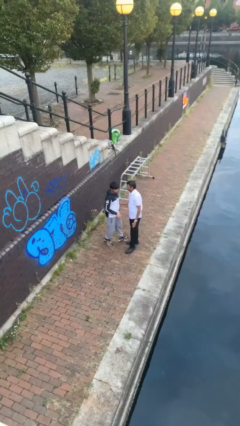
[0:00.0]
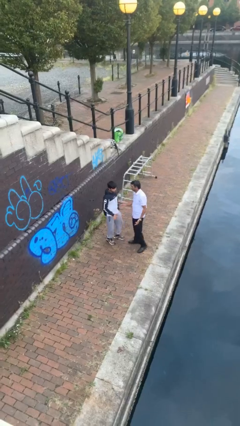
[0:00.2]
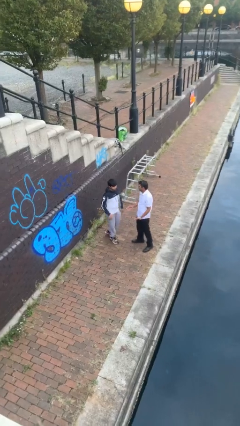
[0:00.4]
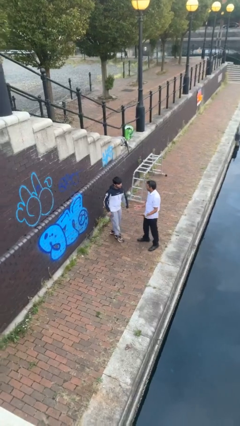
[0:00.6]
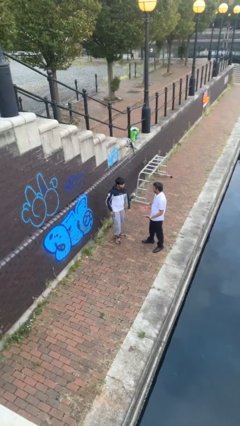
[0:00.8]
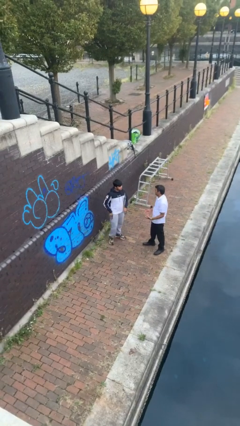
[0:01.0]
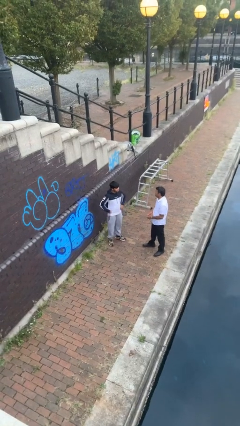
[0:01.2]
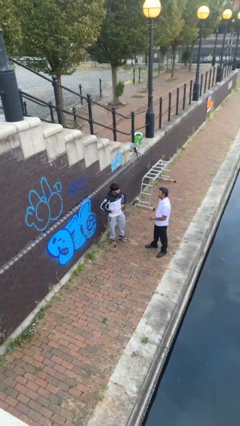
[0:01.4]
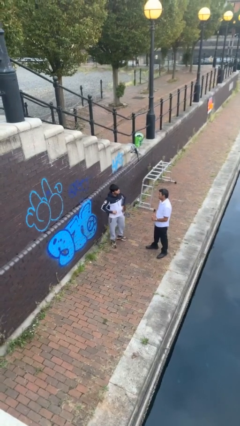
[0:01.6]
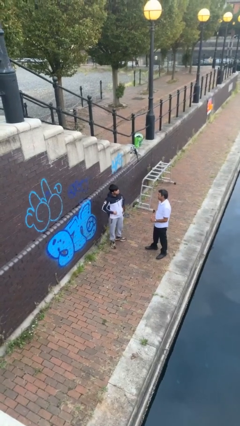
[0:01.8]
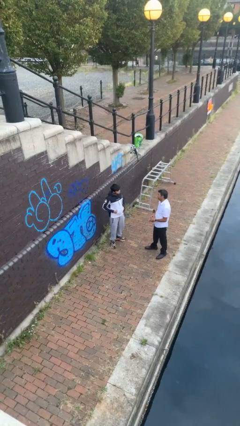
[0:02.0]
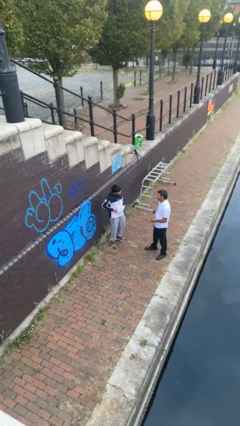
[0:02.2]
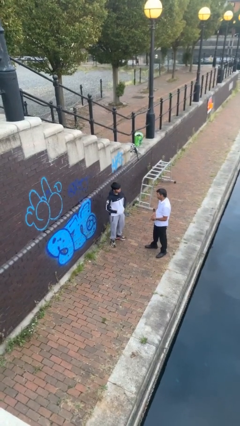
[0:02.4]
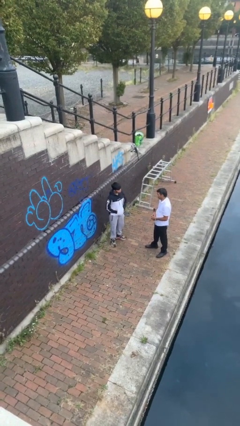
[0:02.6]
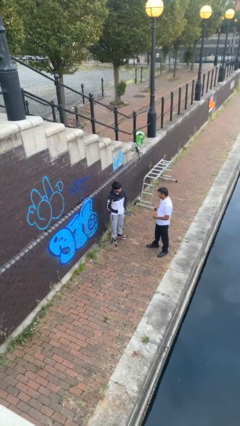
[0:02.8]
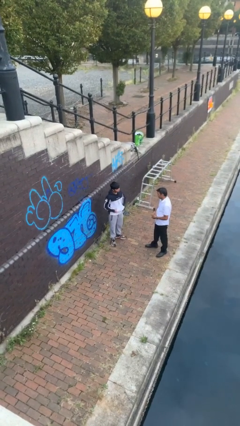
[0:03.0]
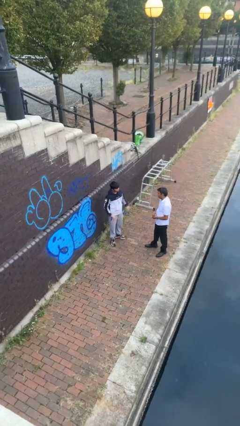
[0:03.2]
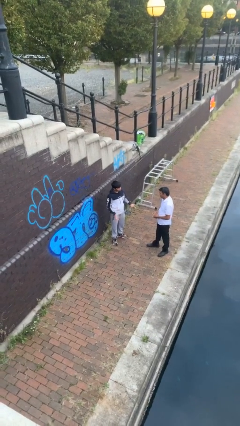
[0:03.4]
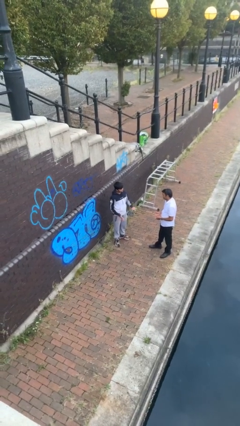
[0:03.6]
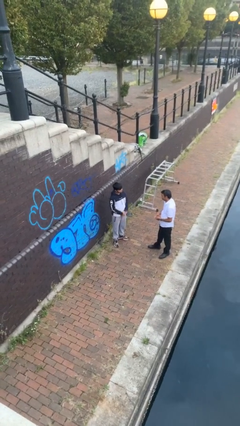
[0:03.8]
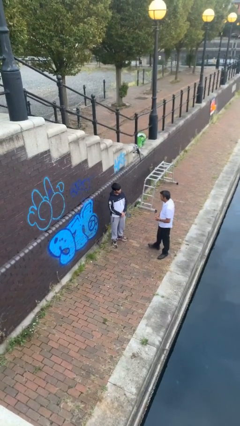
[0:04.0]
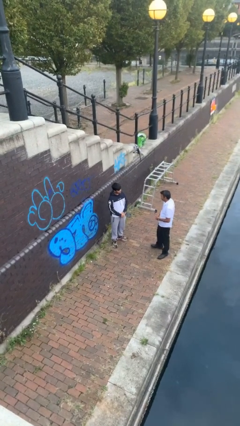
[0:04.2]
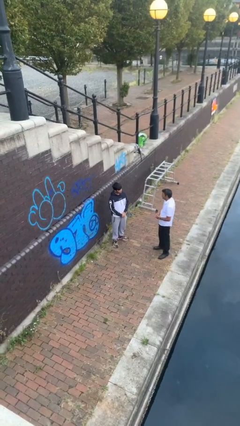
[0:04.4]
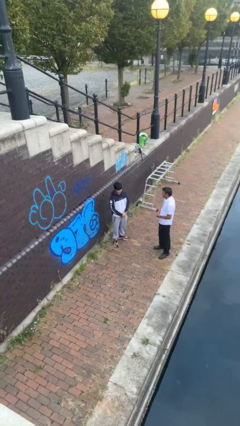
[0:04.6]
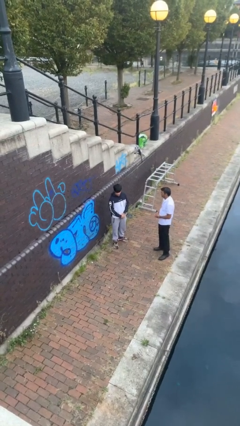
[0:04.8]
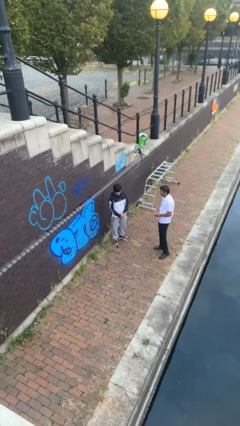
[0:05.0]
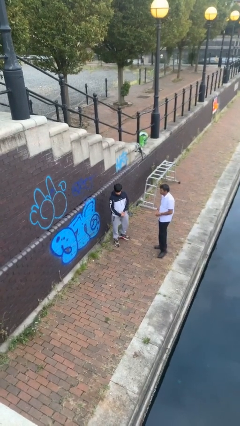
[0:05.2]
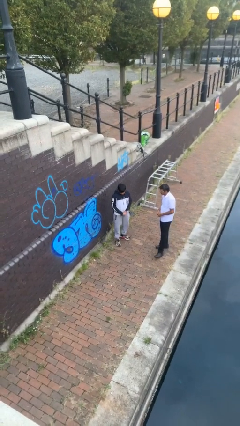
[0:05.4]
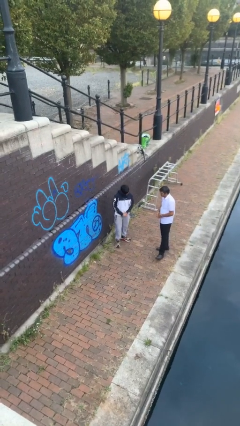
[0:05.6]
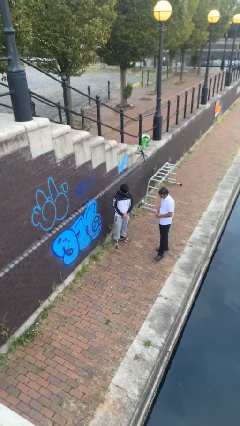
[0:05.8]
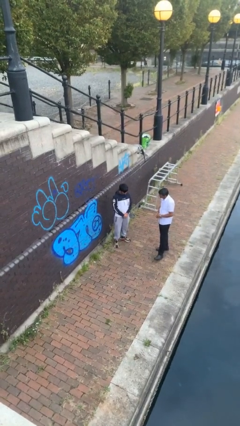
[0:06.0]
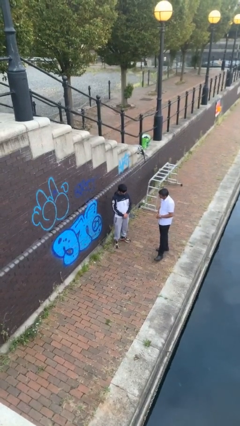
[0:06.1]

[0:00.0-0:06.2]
person talks to person

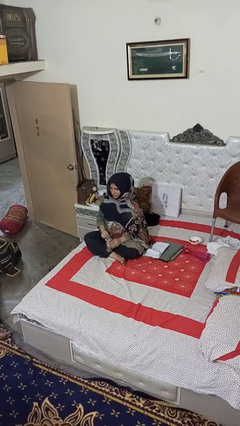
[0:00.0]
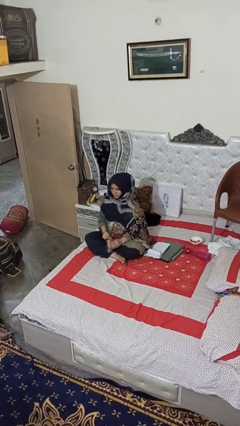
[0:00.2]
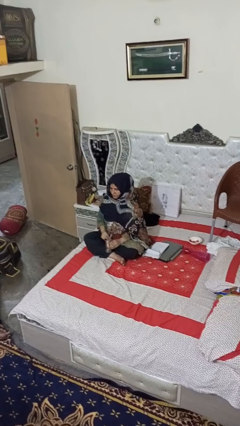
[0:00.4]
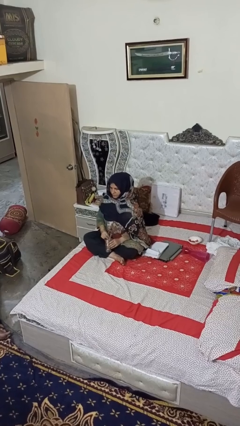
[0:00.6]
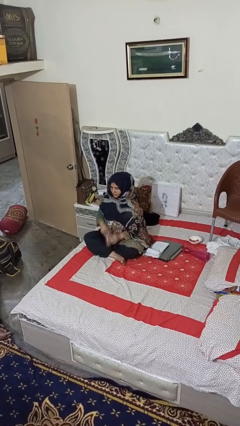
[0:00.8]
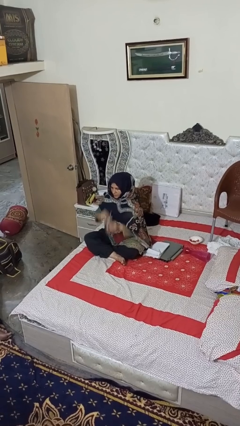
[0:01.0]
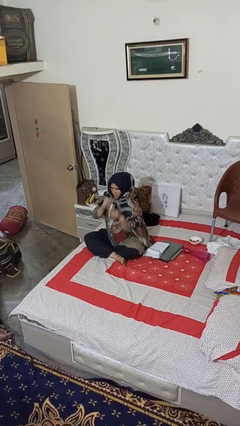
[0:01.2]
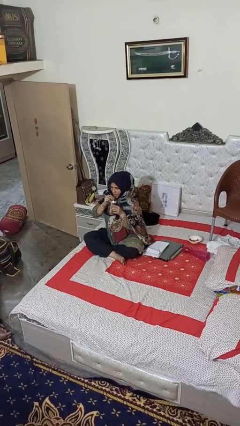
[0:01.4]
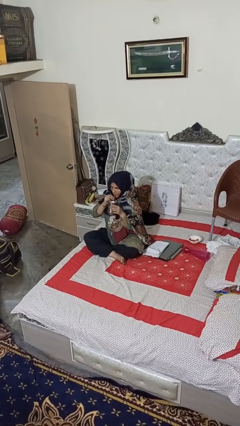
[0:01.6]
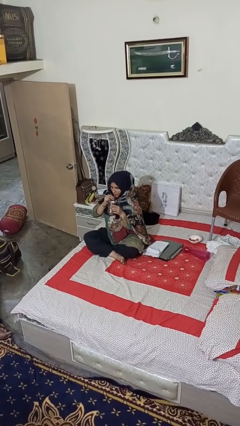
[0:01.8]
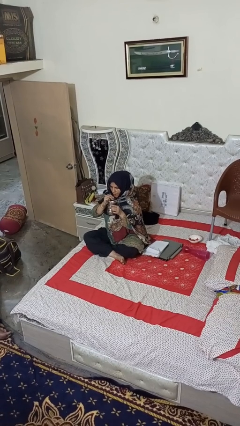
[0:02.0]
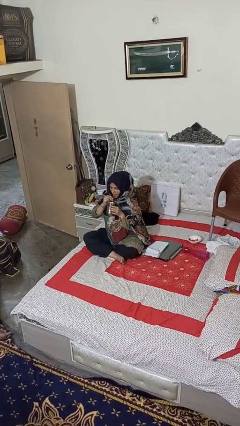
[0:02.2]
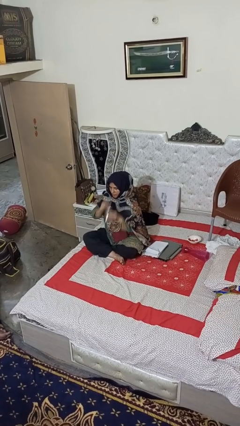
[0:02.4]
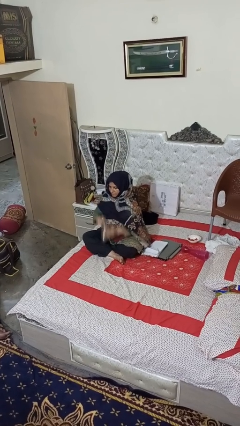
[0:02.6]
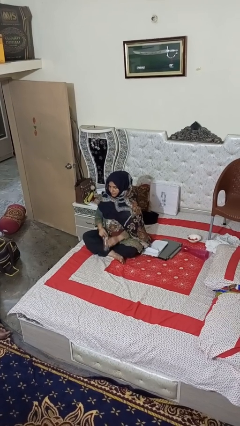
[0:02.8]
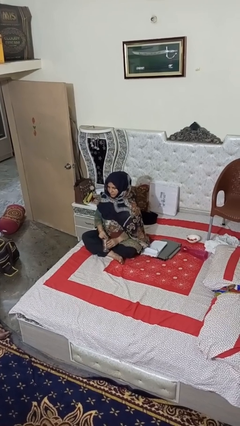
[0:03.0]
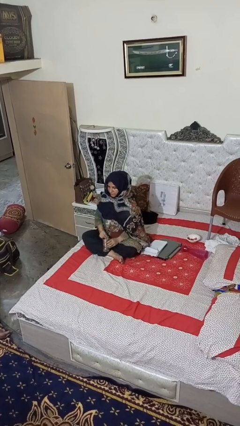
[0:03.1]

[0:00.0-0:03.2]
person drinks from straw

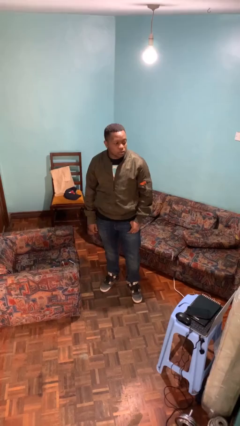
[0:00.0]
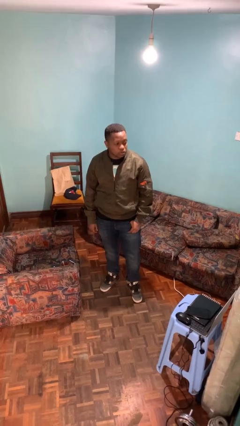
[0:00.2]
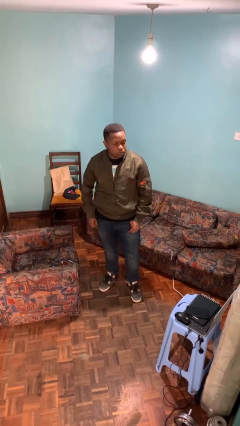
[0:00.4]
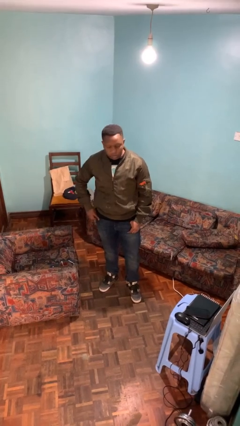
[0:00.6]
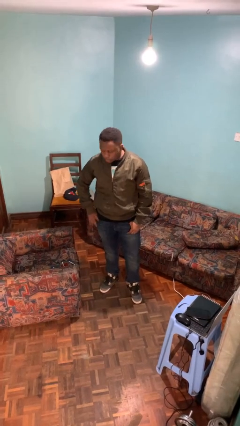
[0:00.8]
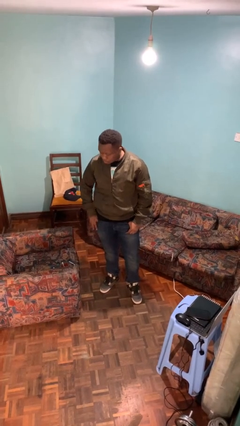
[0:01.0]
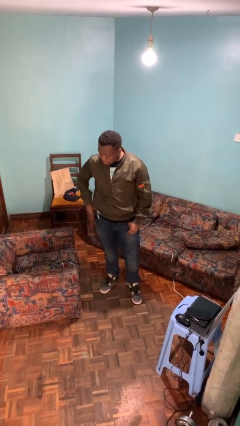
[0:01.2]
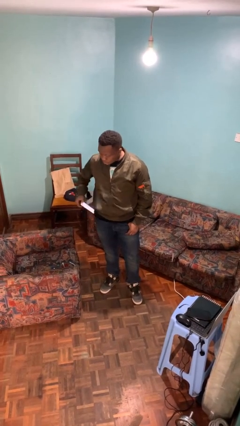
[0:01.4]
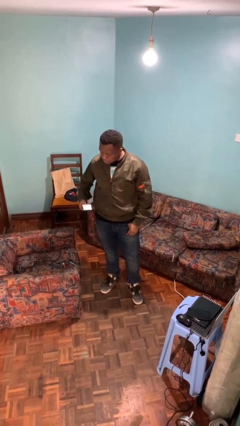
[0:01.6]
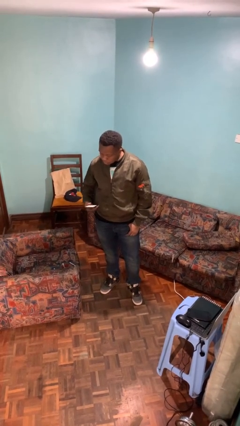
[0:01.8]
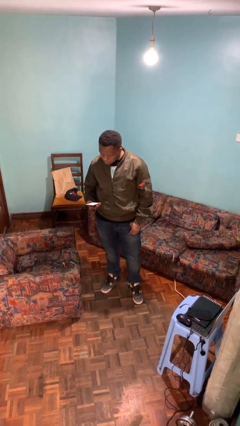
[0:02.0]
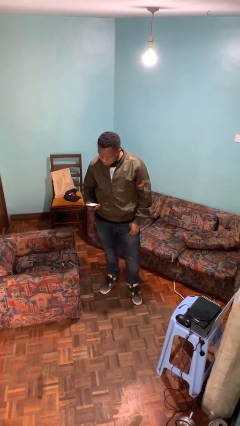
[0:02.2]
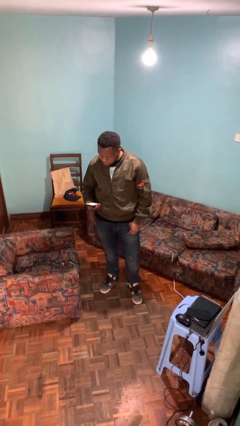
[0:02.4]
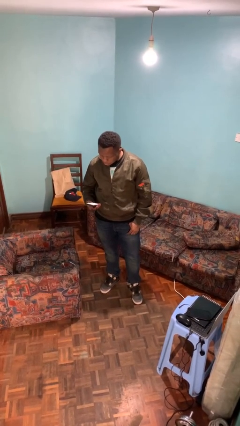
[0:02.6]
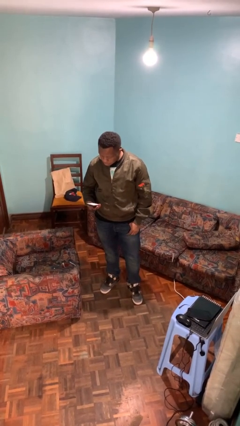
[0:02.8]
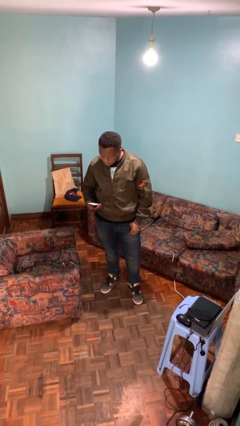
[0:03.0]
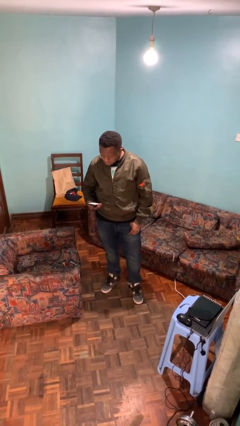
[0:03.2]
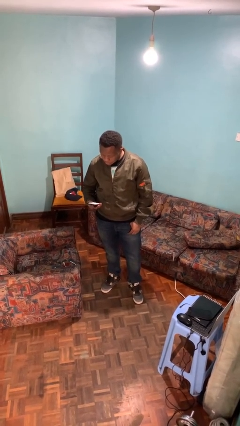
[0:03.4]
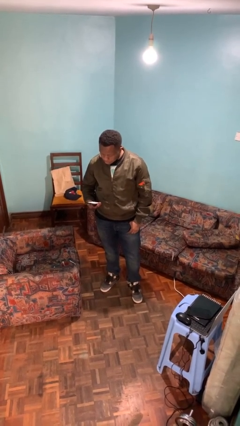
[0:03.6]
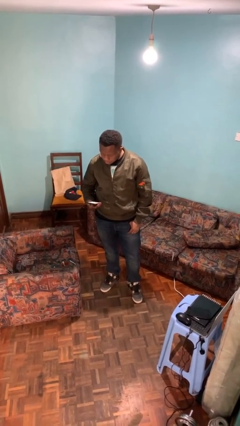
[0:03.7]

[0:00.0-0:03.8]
person takes phone from pocket

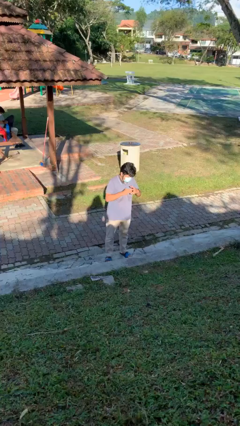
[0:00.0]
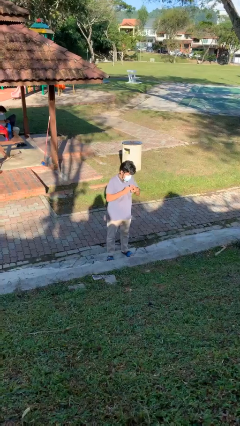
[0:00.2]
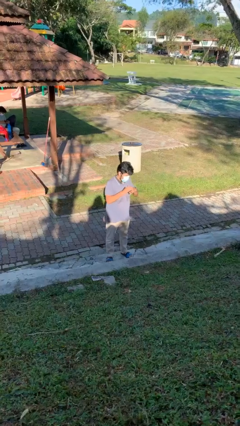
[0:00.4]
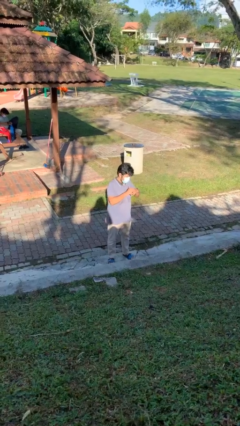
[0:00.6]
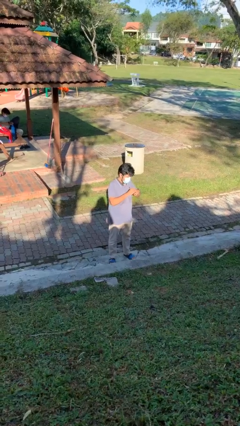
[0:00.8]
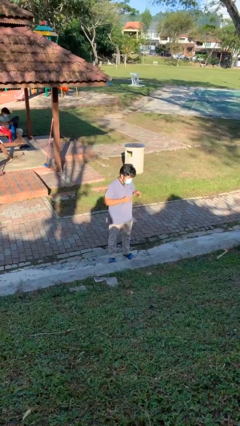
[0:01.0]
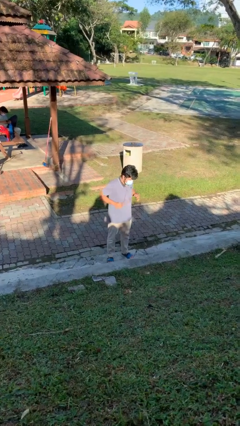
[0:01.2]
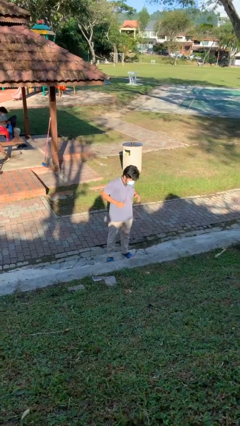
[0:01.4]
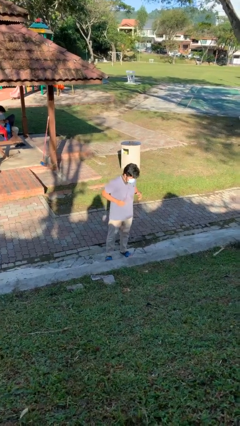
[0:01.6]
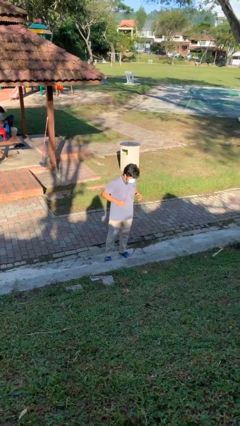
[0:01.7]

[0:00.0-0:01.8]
person puts on ring

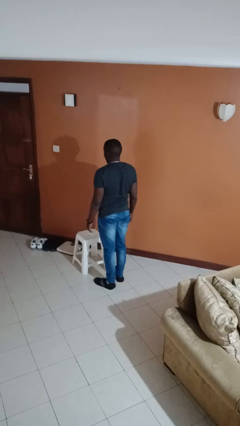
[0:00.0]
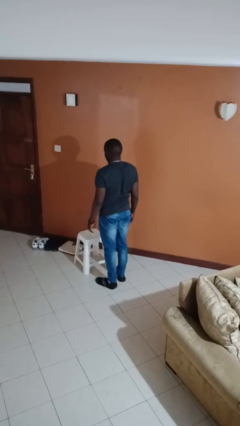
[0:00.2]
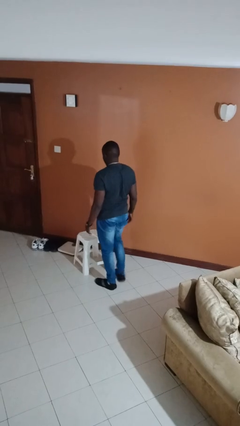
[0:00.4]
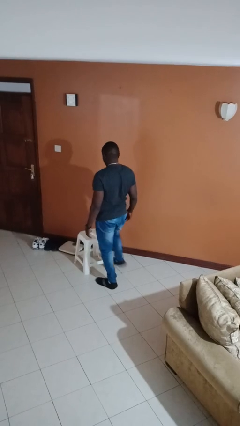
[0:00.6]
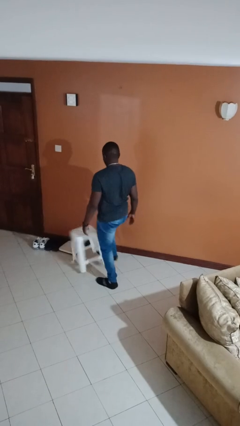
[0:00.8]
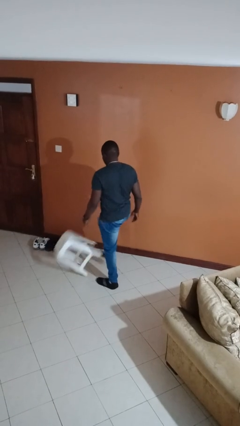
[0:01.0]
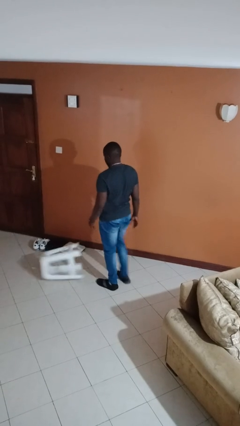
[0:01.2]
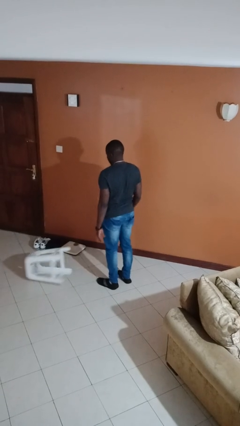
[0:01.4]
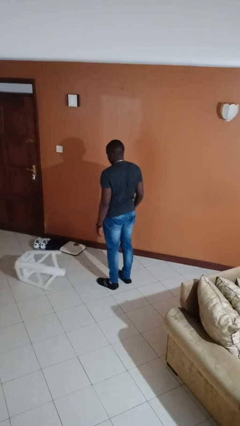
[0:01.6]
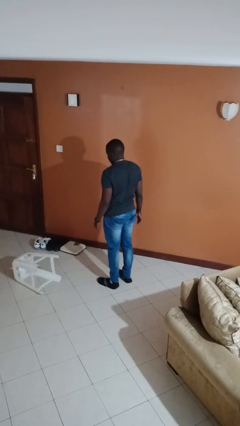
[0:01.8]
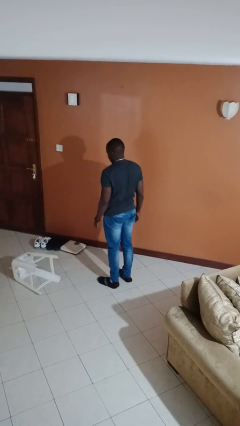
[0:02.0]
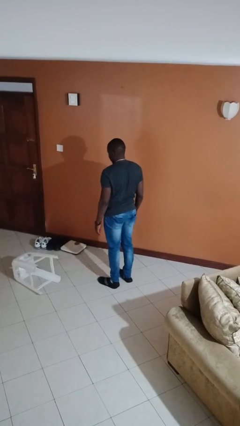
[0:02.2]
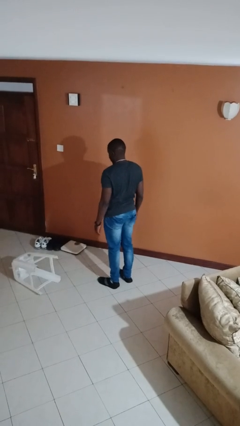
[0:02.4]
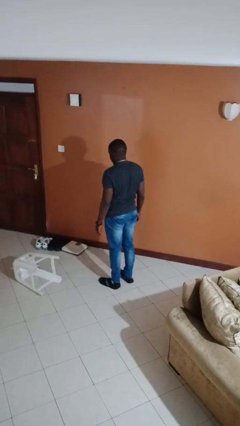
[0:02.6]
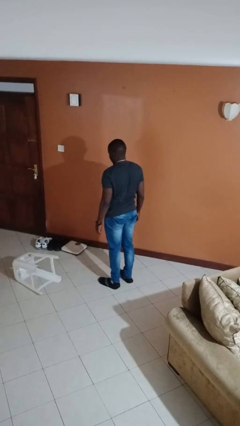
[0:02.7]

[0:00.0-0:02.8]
person knocks over furniture
